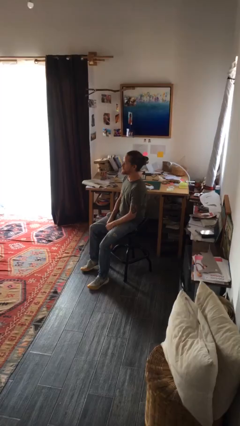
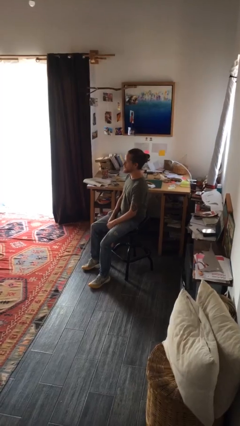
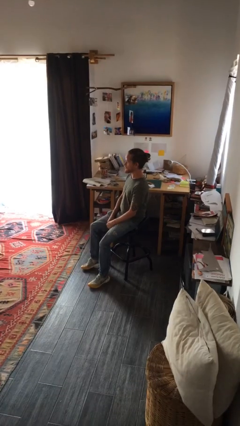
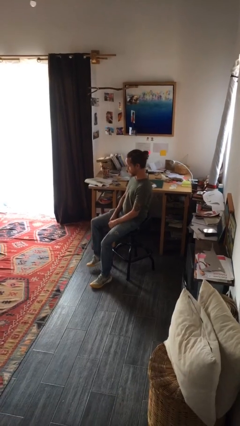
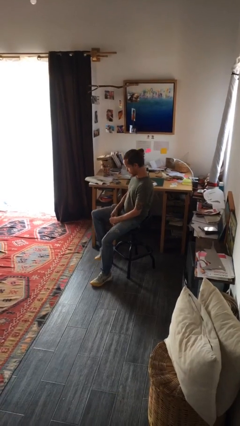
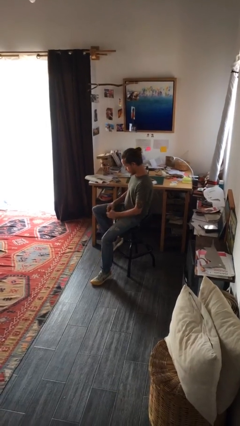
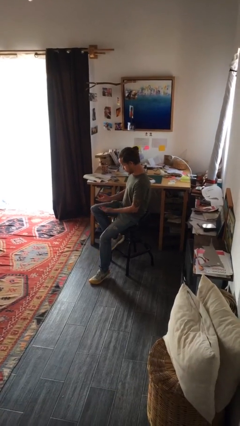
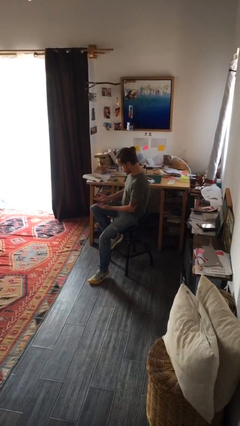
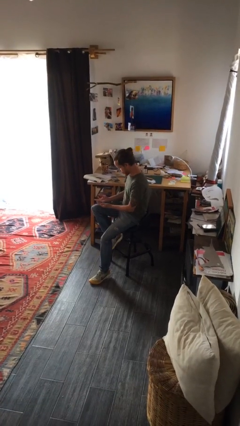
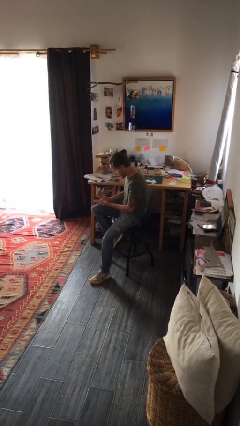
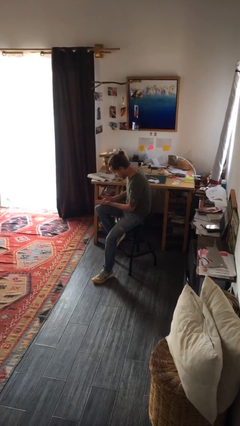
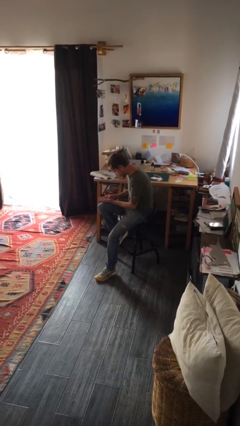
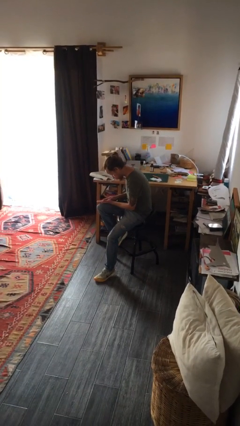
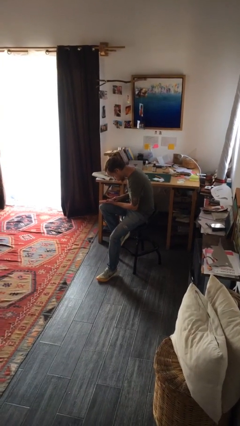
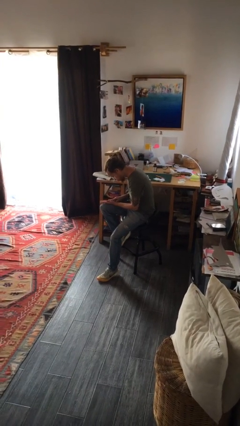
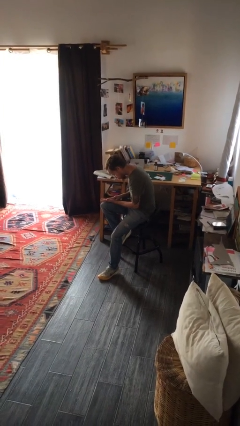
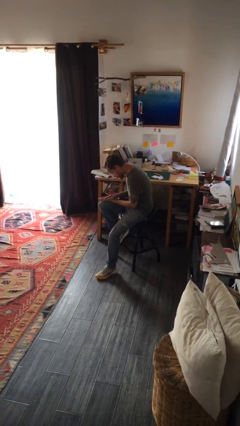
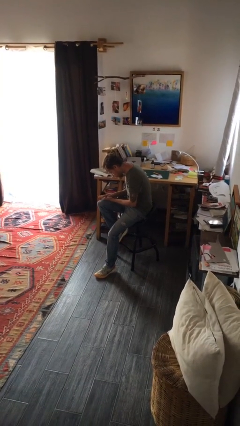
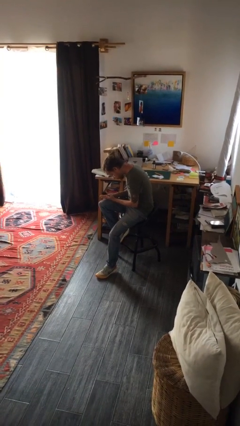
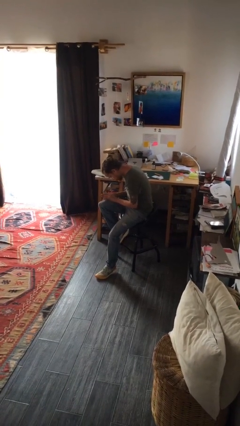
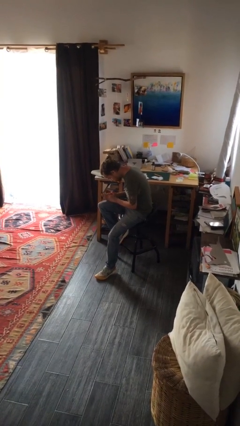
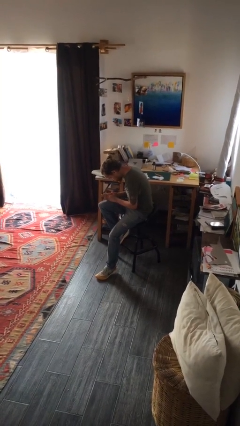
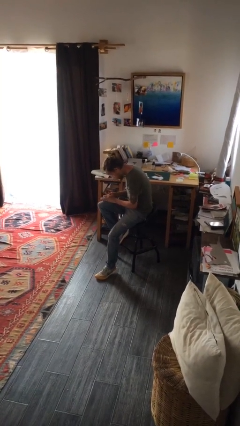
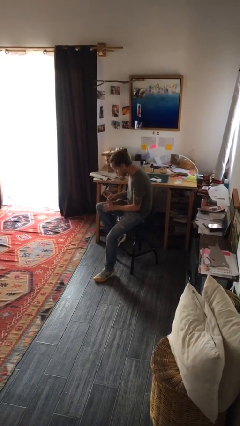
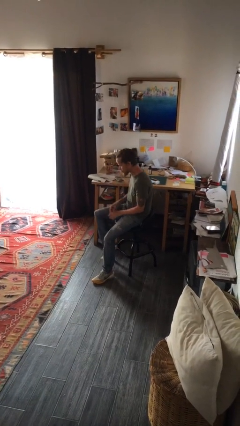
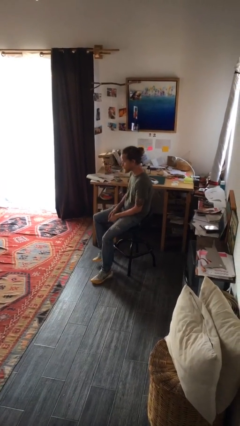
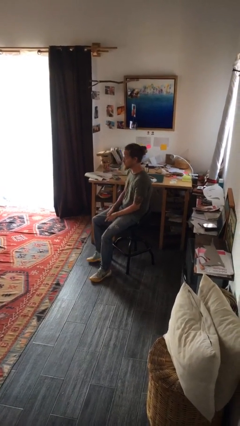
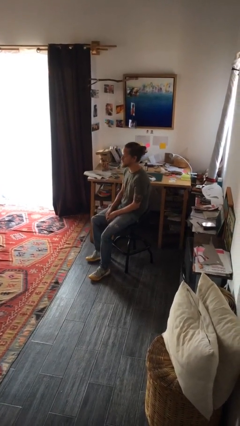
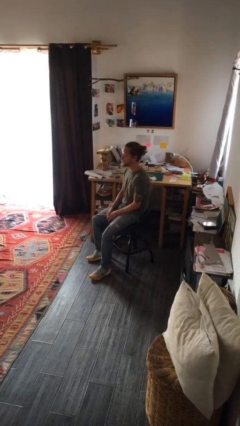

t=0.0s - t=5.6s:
person looks at hands in lap

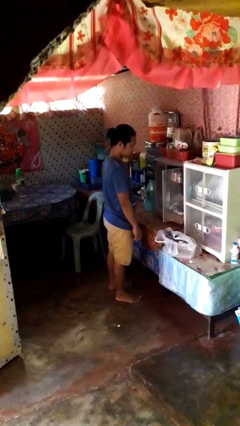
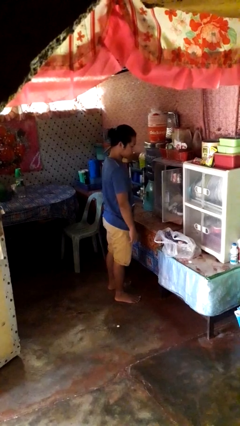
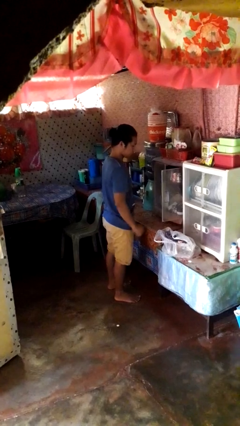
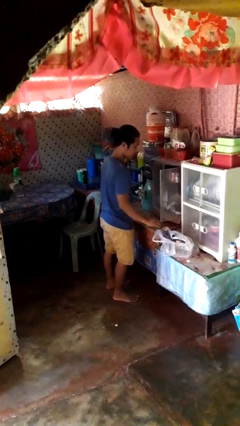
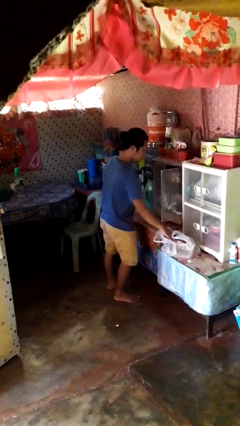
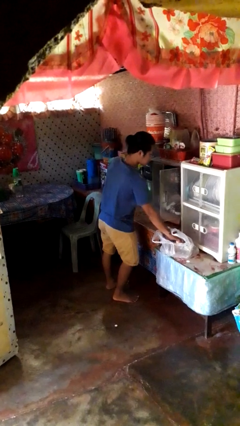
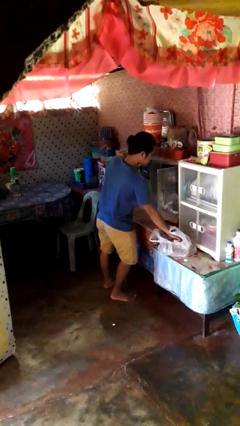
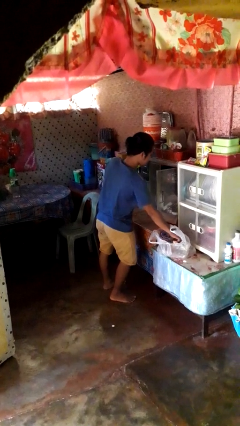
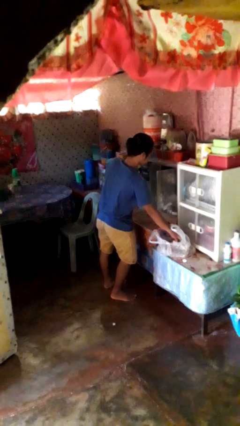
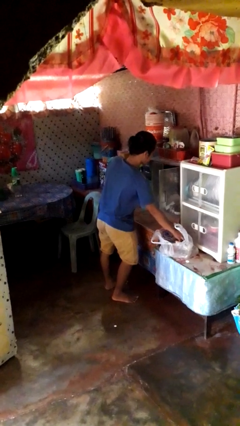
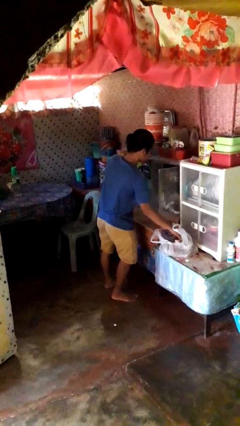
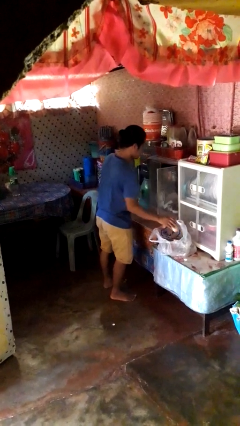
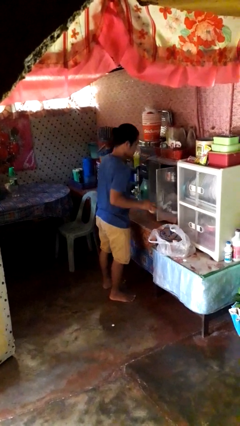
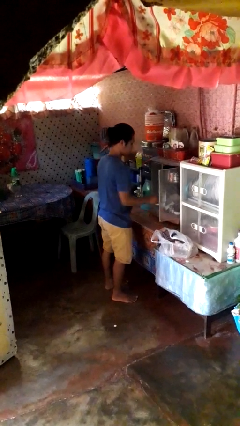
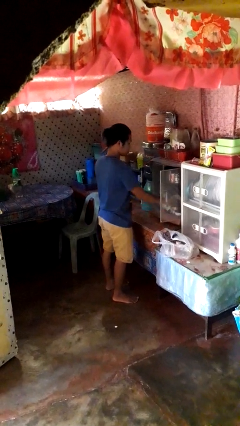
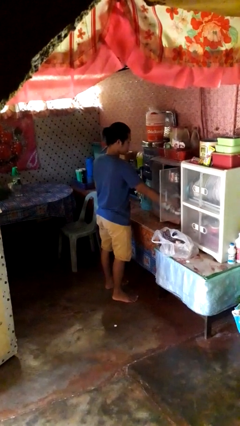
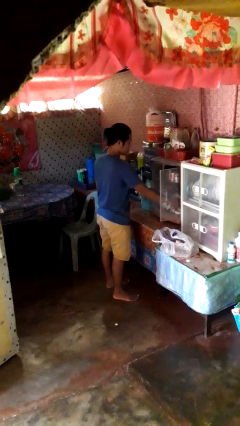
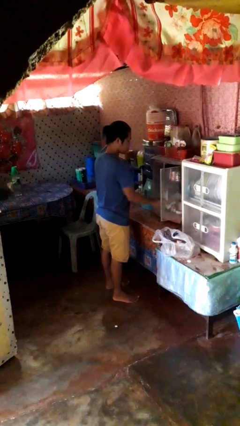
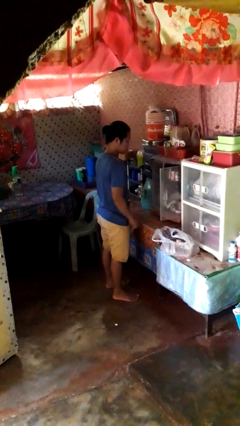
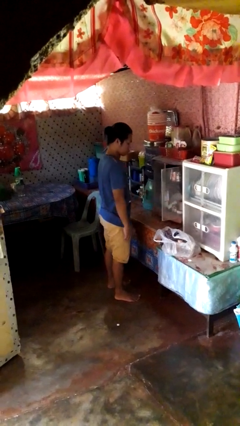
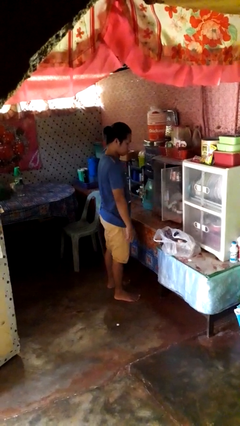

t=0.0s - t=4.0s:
person loads groceries into cabinet

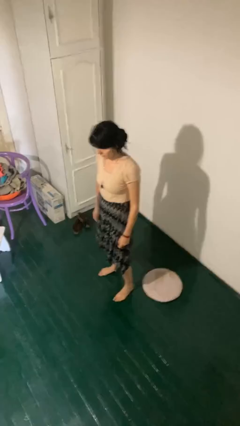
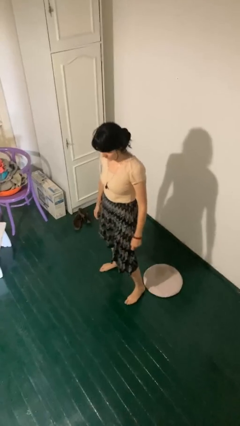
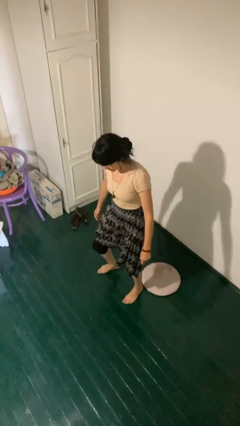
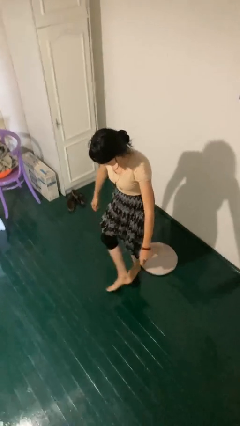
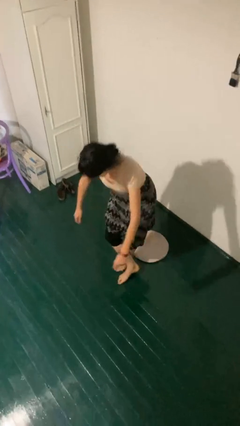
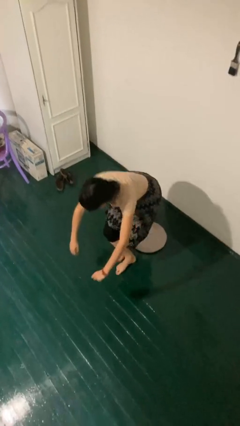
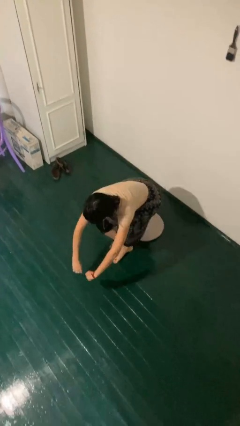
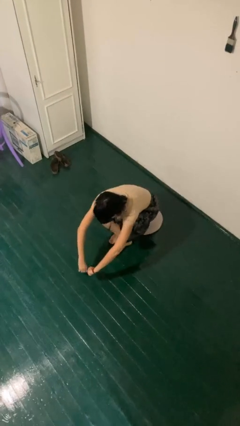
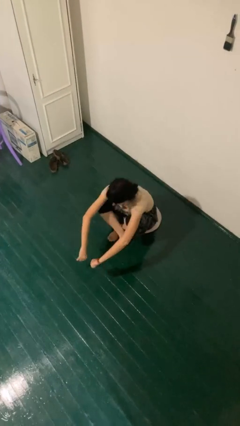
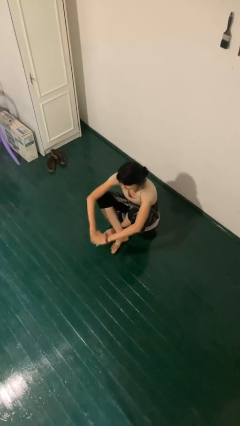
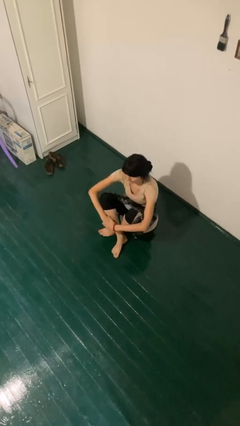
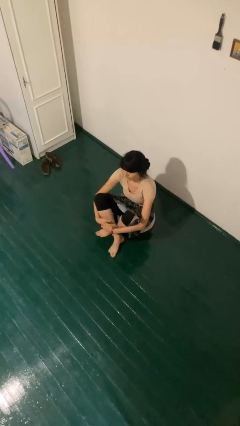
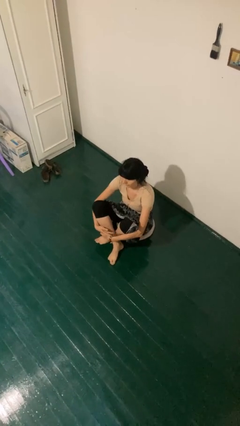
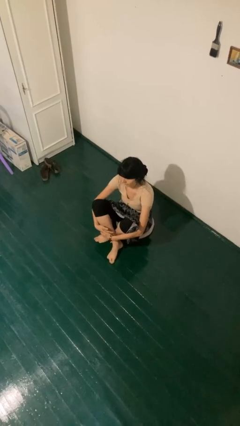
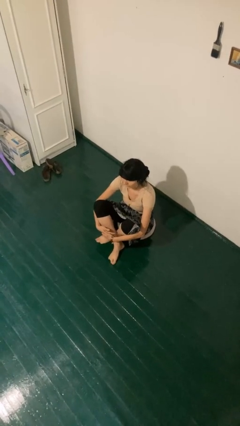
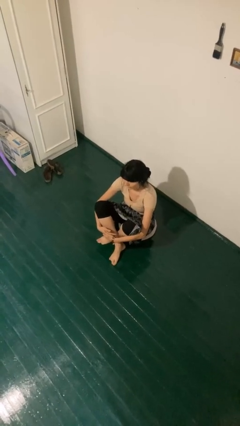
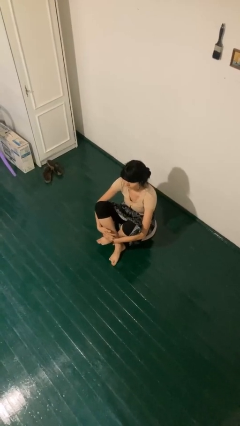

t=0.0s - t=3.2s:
person sits crisscross

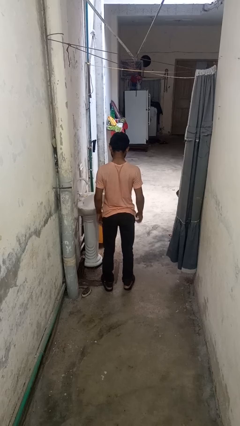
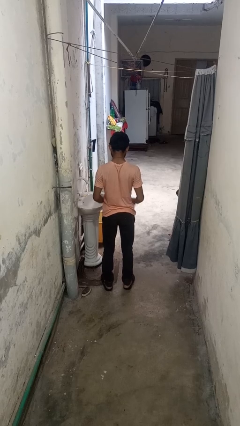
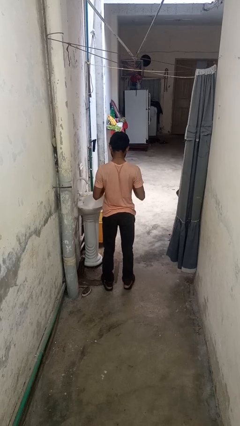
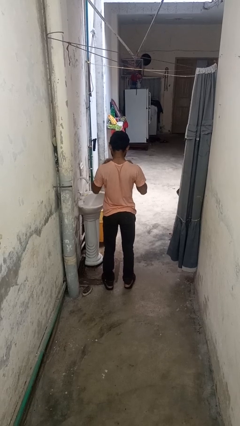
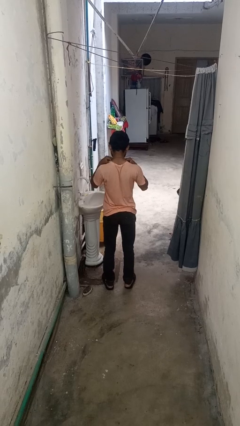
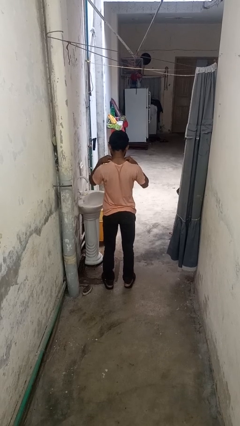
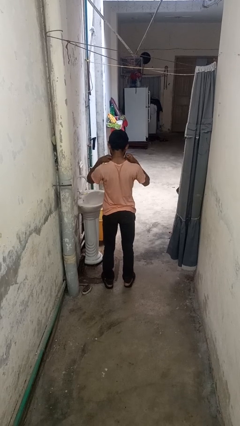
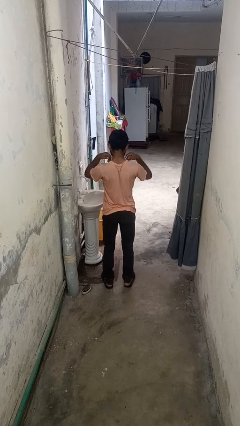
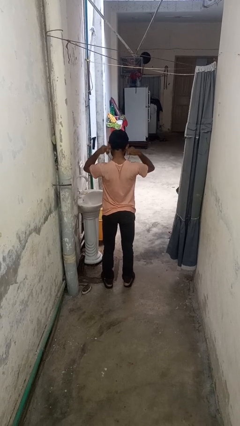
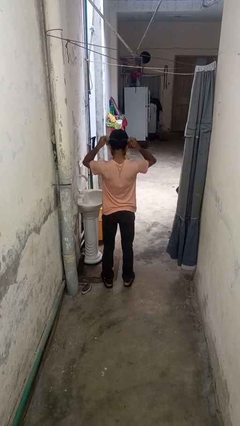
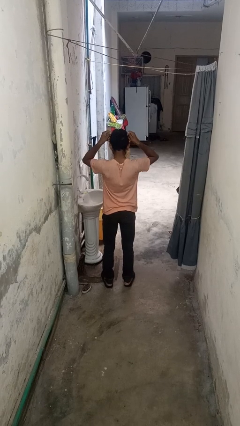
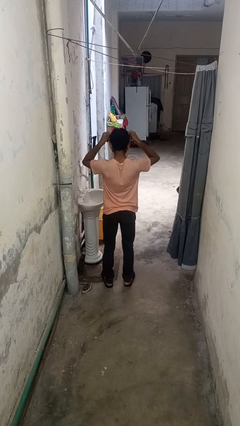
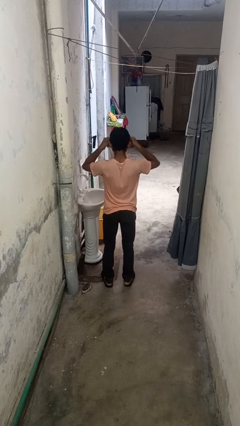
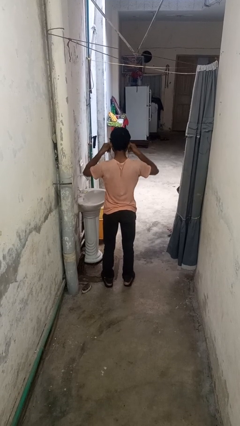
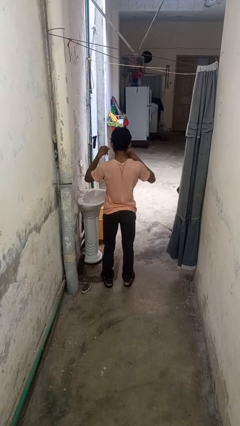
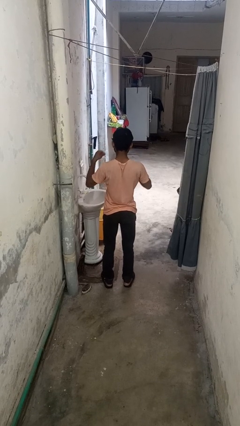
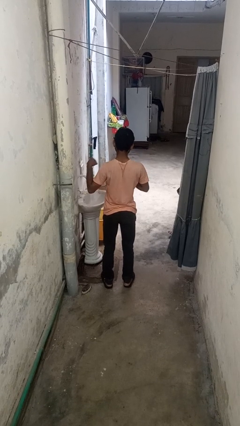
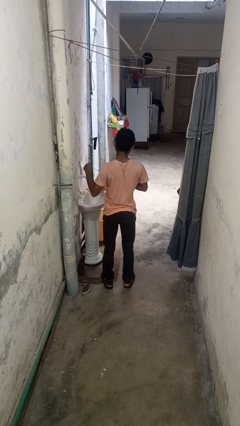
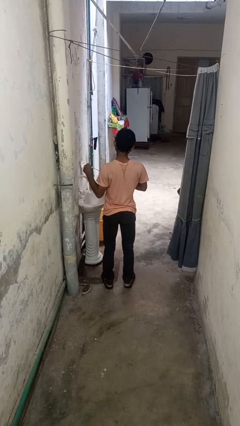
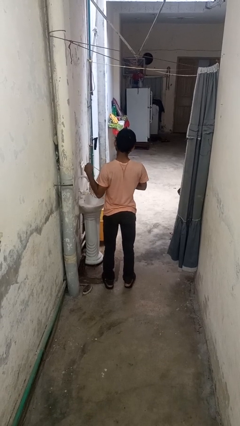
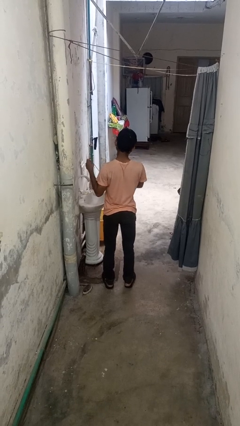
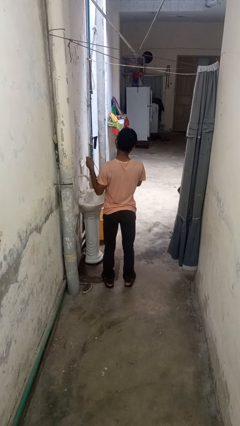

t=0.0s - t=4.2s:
person takes off necklace

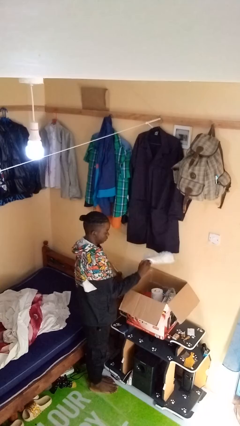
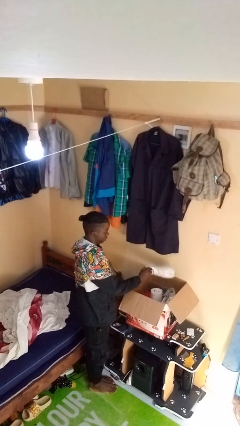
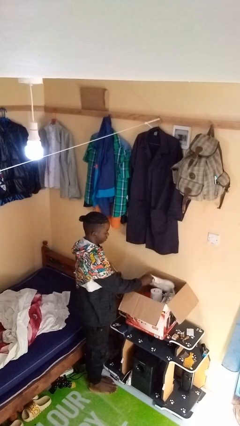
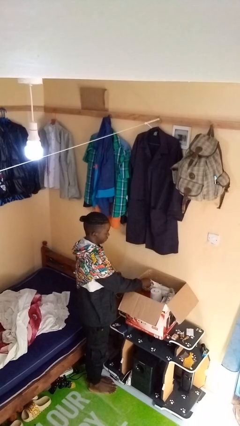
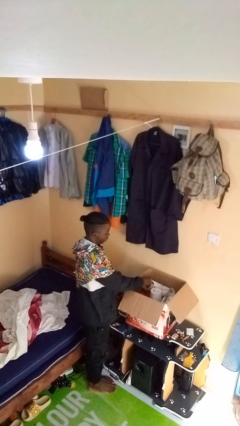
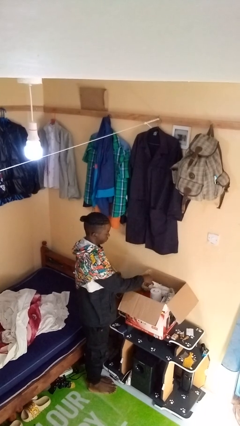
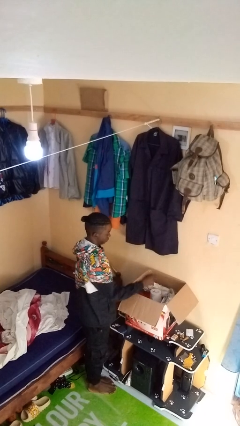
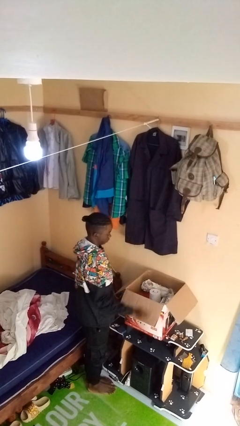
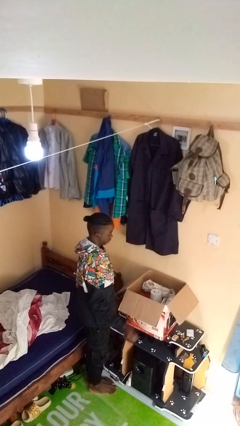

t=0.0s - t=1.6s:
person puts object into box
